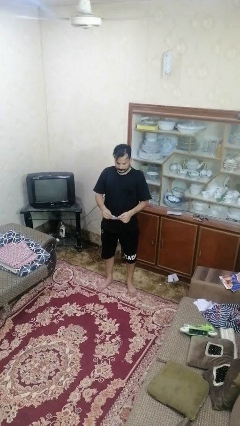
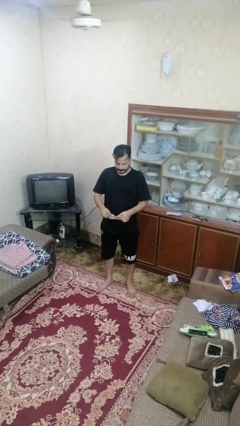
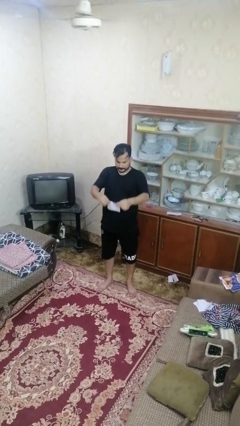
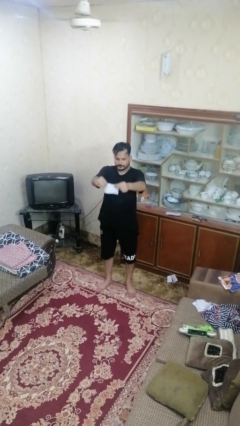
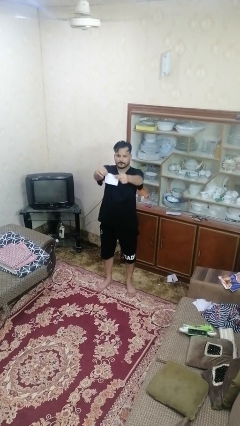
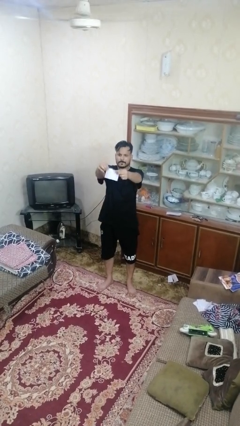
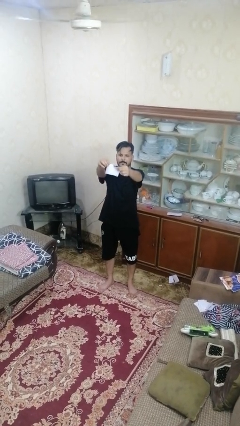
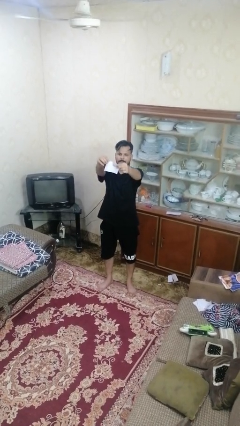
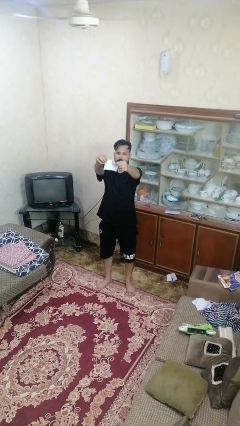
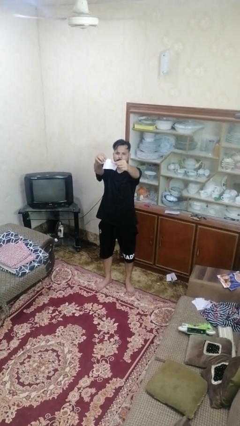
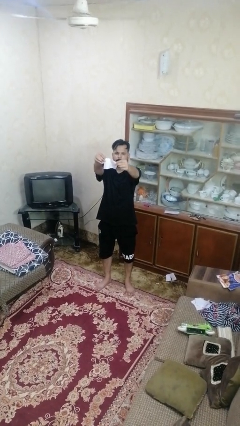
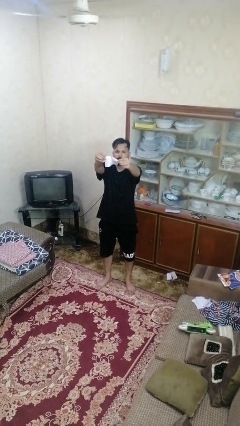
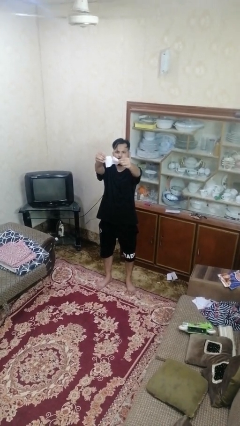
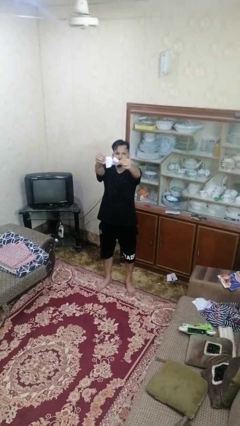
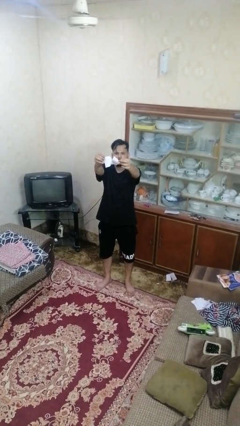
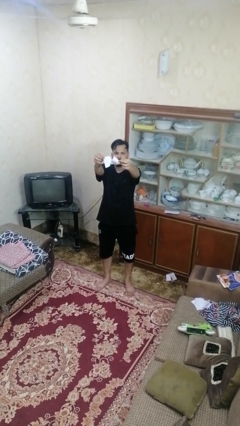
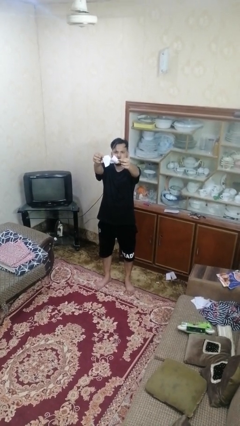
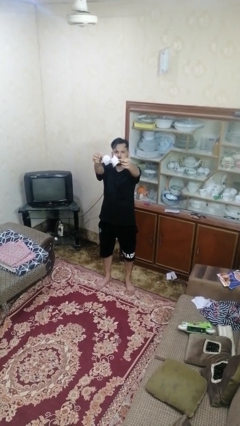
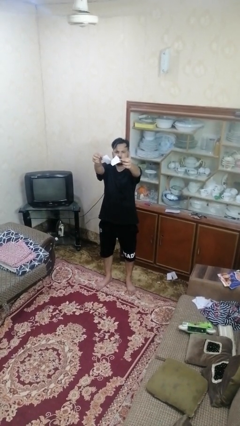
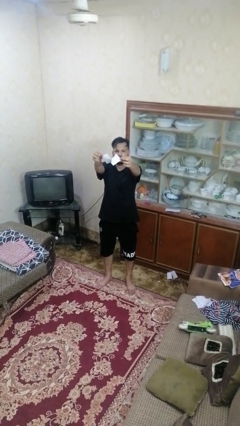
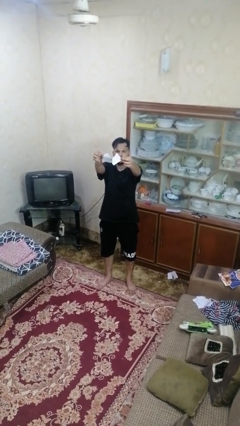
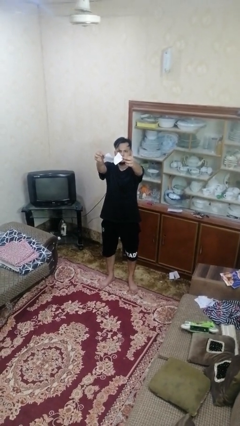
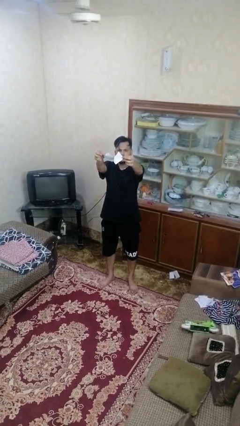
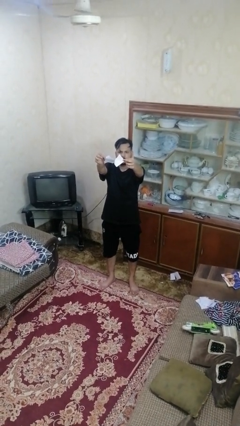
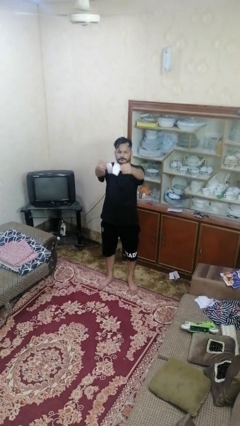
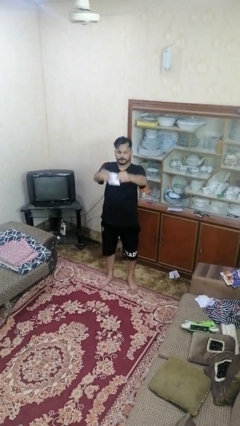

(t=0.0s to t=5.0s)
person tears paper

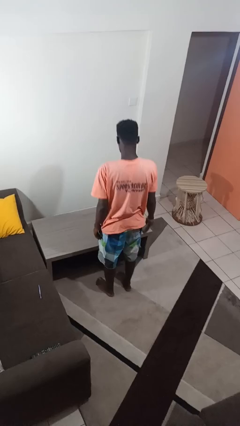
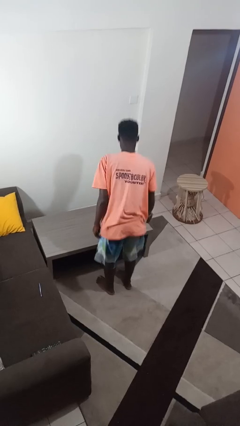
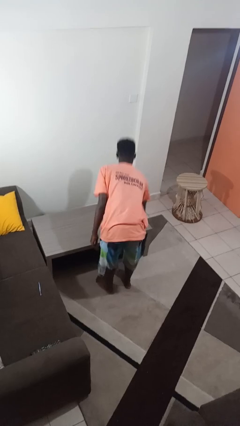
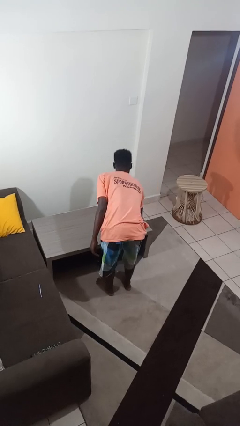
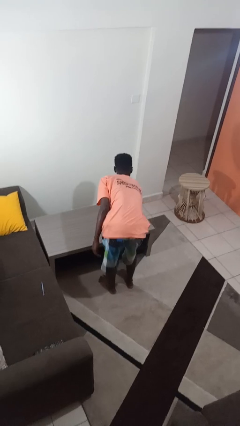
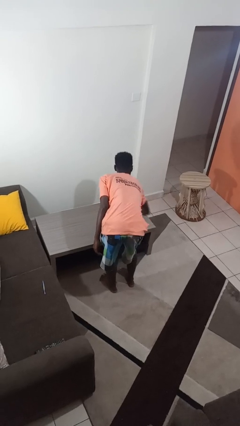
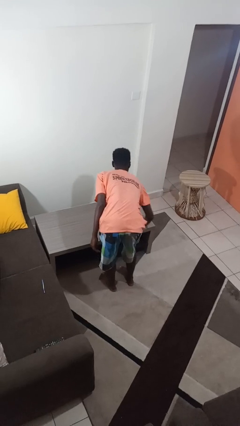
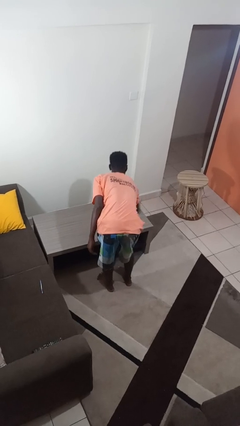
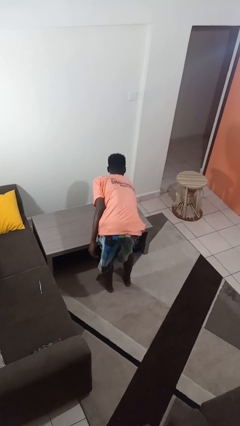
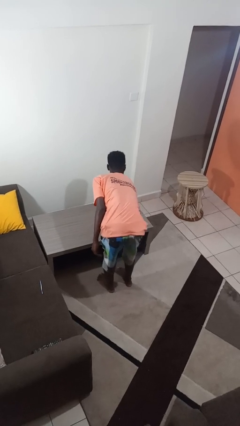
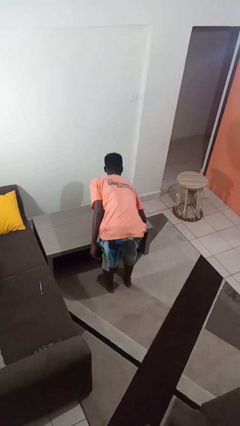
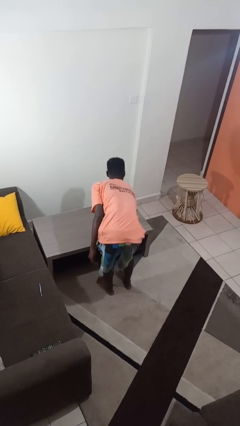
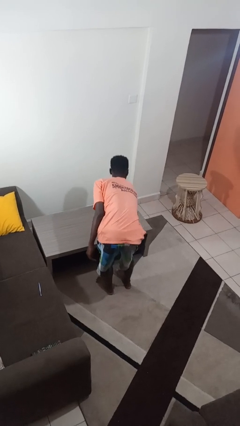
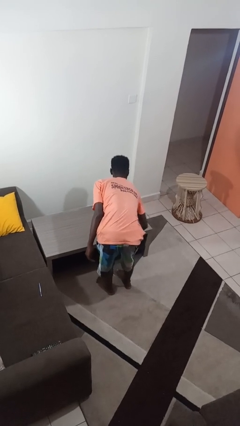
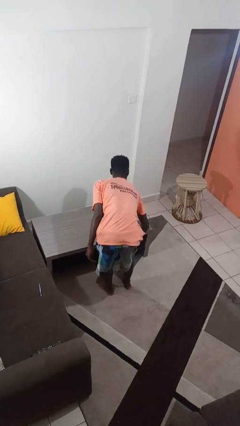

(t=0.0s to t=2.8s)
person cleans table with rag

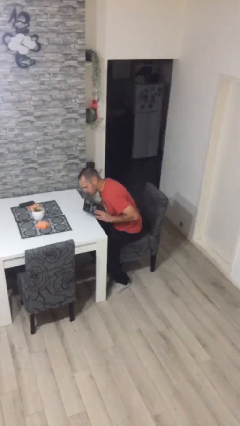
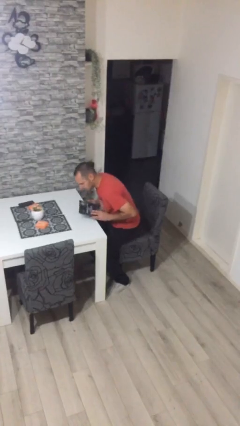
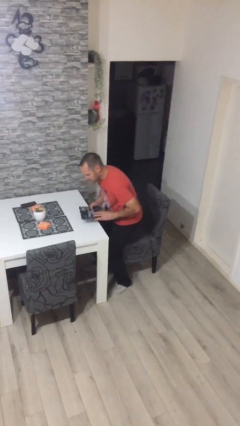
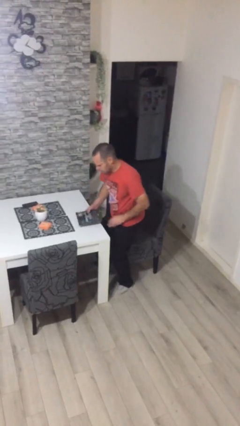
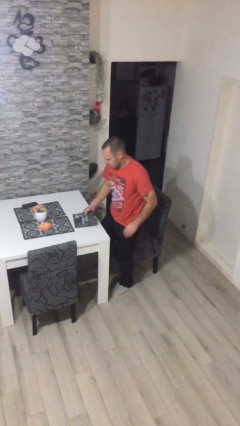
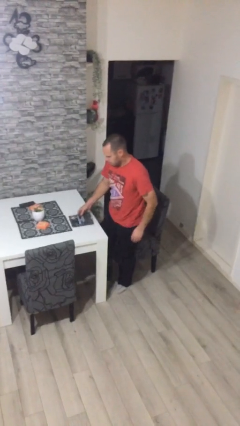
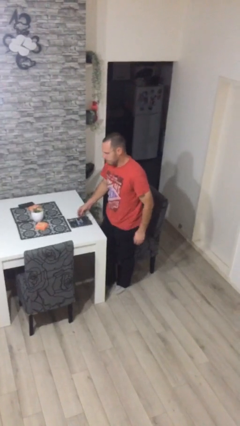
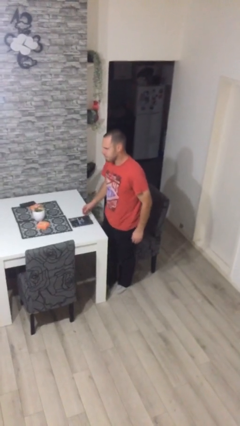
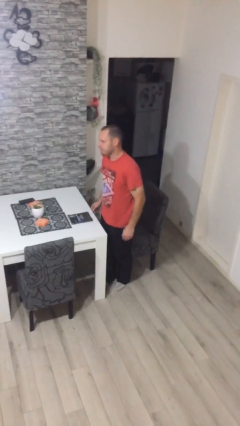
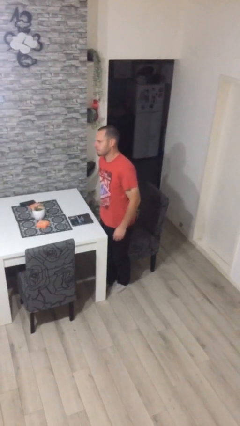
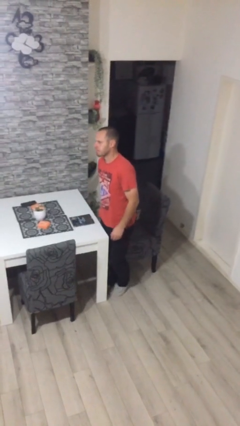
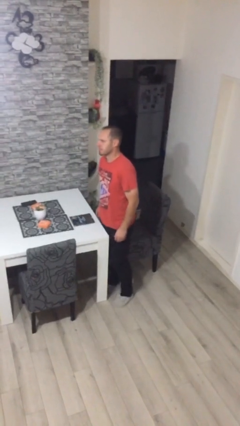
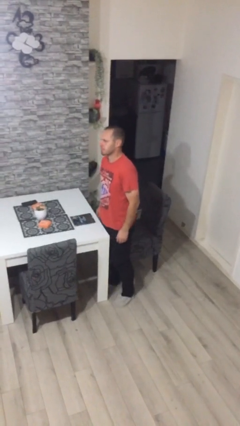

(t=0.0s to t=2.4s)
person stands up

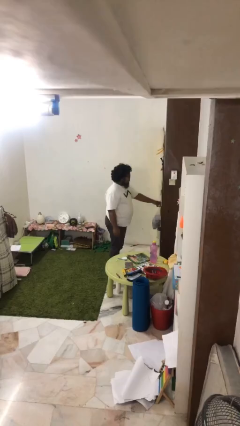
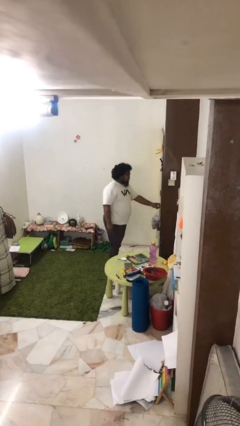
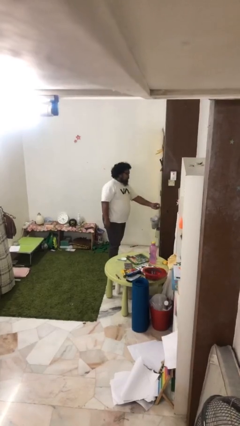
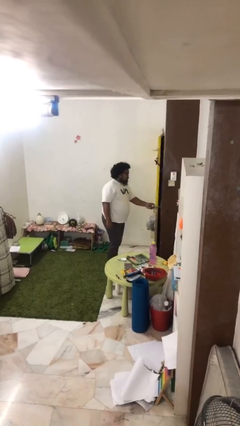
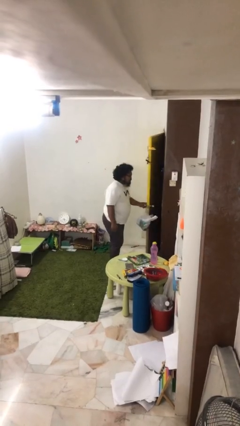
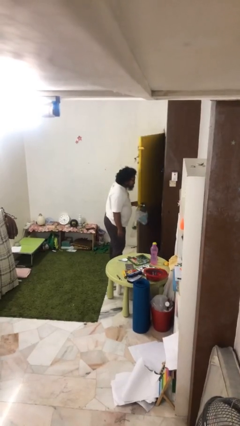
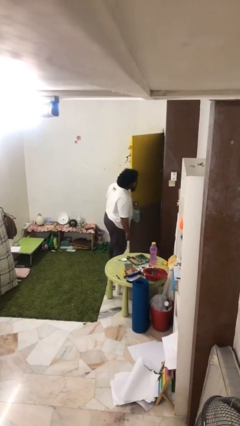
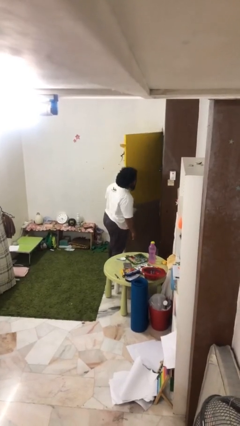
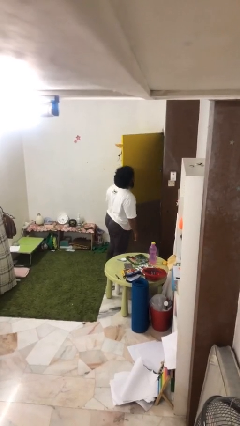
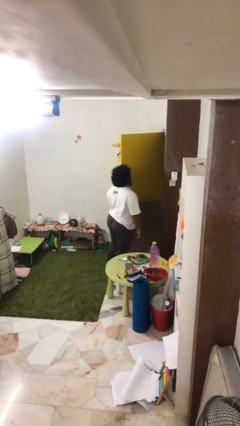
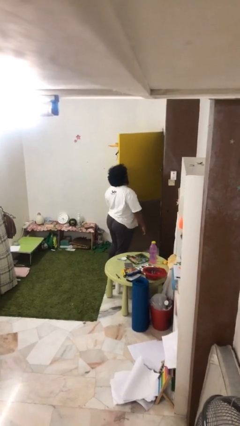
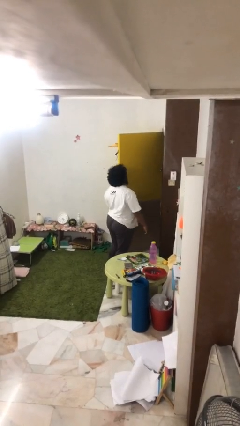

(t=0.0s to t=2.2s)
person opens facility door

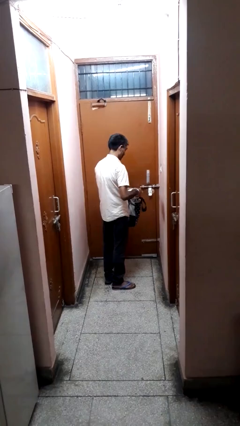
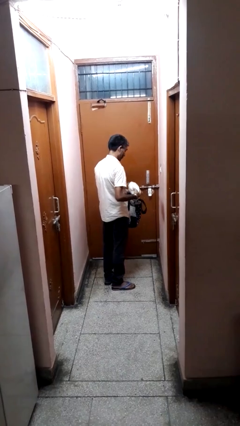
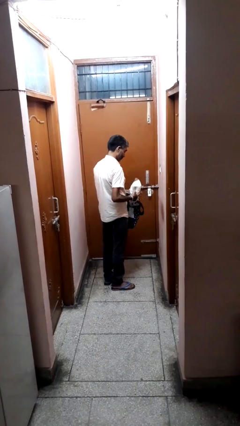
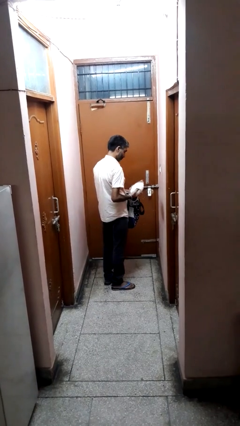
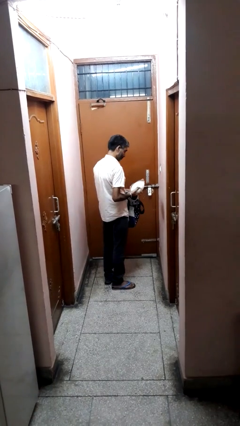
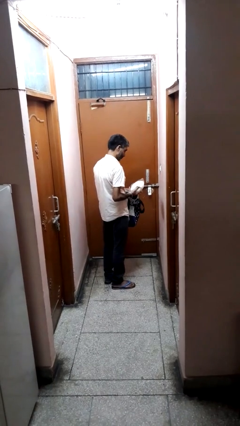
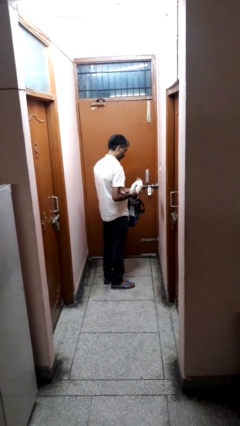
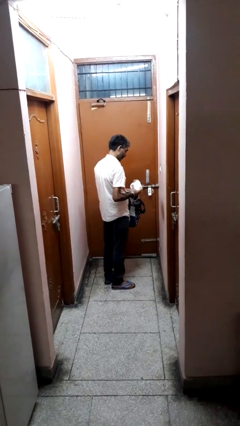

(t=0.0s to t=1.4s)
person takes object from bag

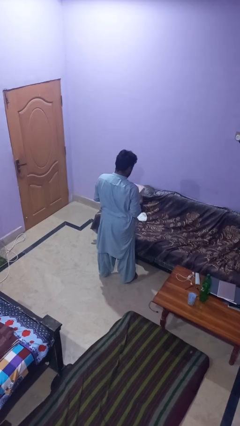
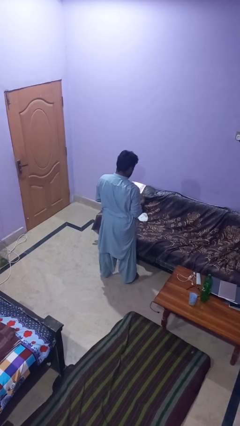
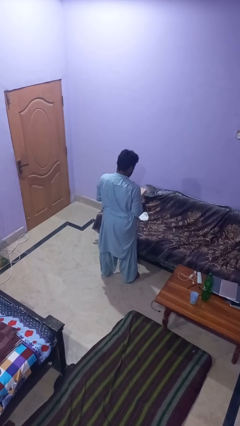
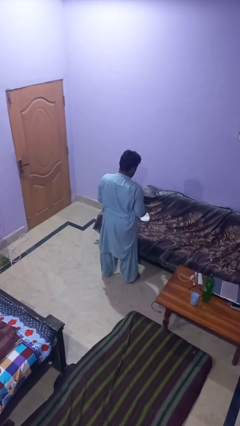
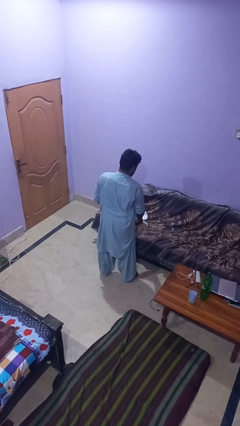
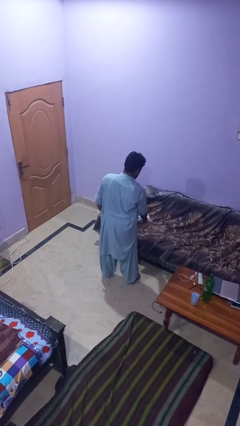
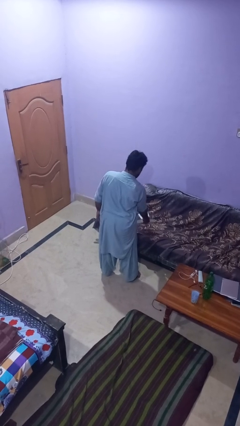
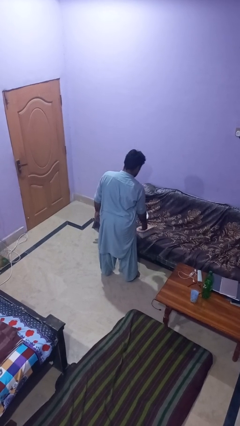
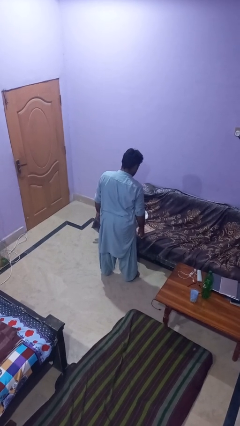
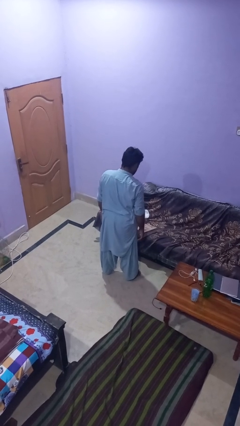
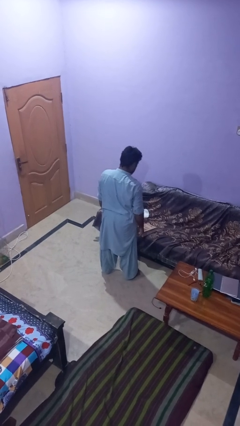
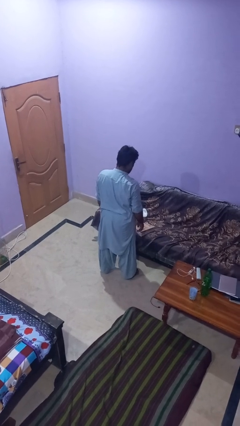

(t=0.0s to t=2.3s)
person puts down object on couch

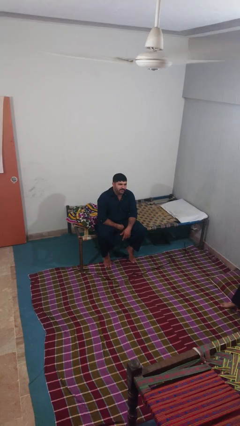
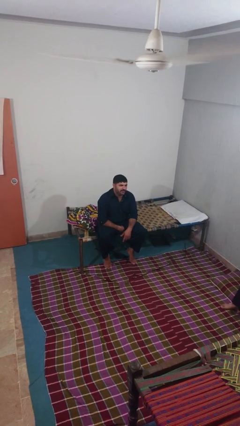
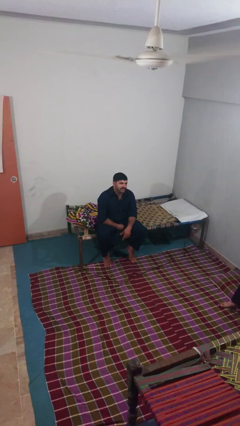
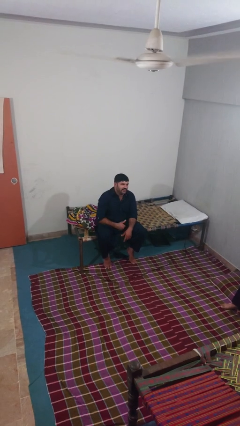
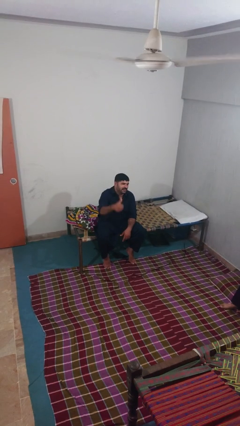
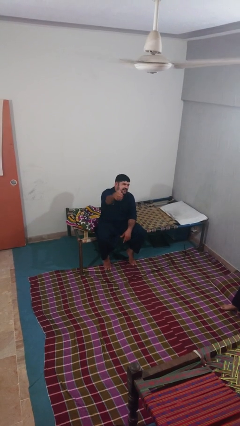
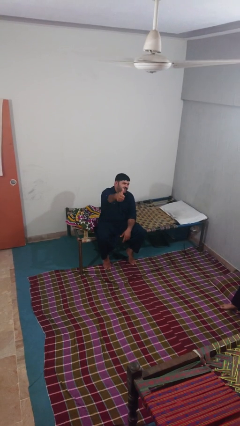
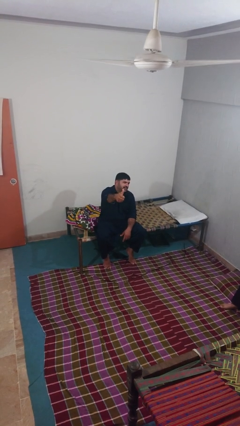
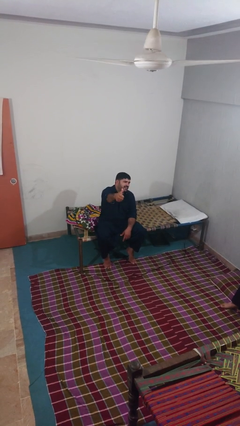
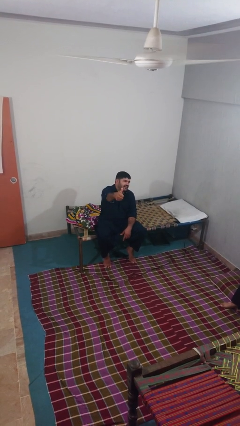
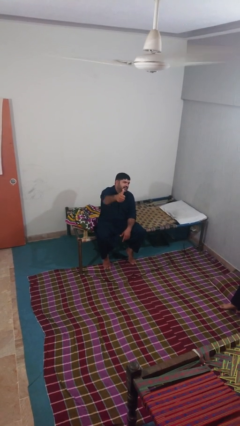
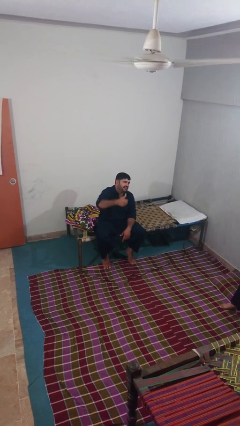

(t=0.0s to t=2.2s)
person gestures thumbs up
